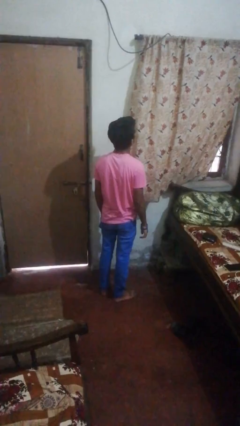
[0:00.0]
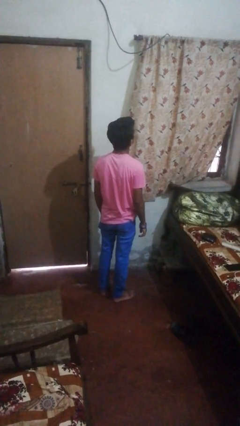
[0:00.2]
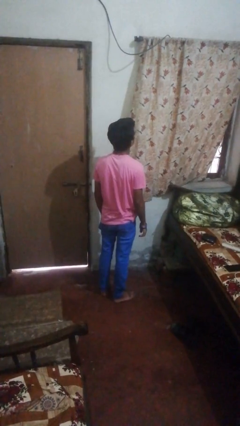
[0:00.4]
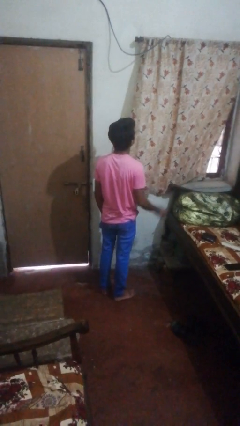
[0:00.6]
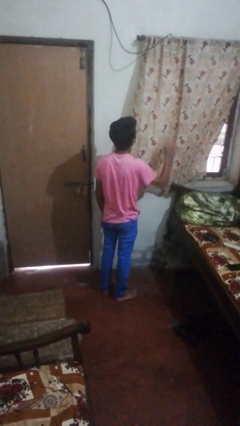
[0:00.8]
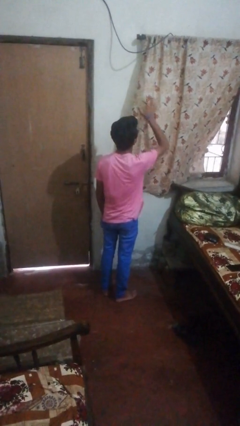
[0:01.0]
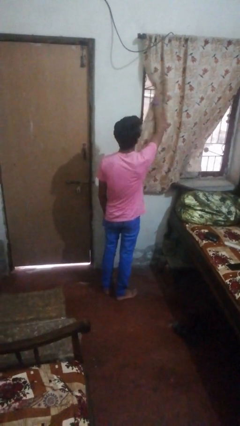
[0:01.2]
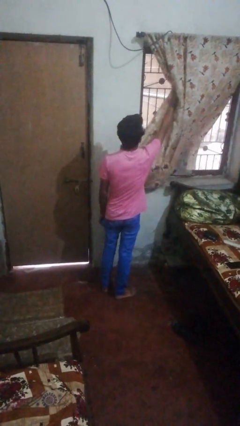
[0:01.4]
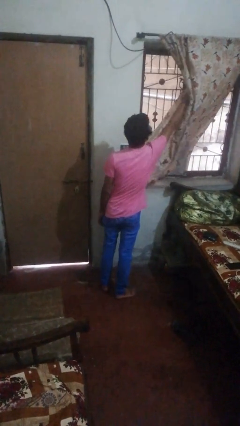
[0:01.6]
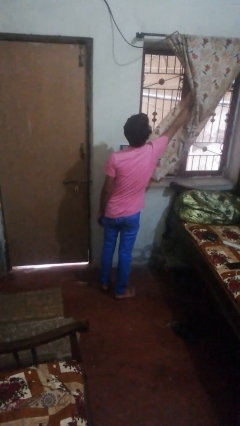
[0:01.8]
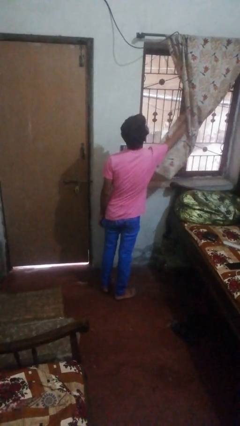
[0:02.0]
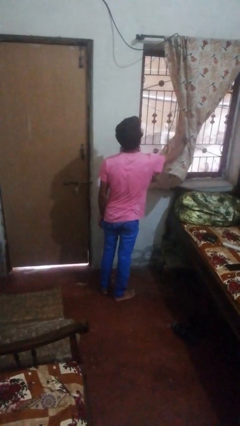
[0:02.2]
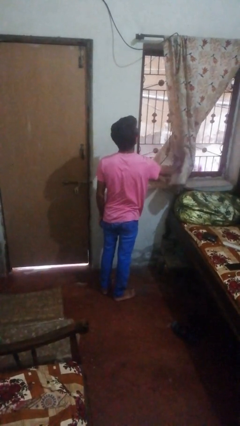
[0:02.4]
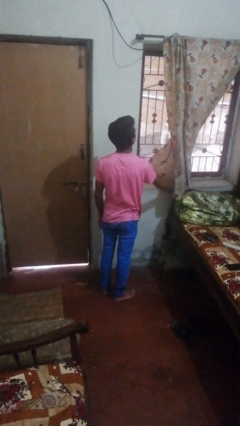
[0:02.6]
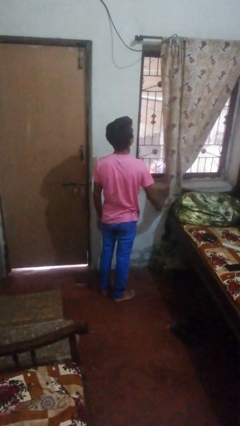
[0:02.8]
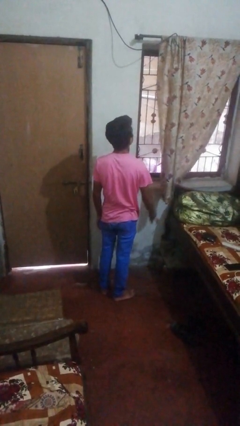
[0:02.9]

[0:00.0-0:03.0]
person opens curtains

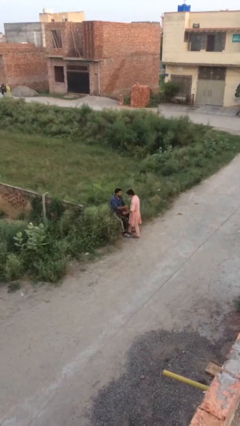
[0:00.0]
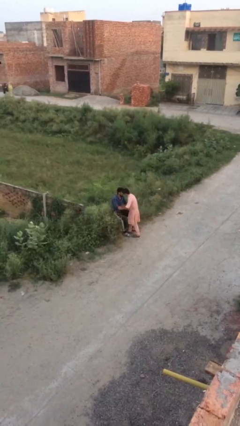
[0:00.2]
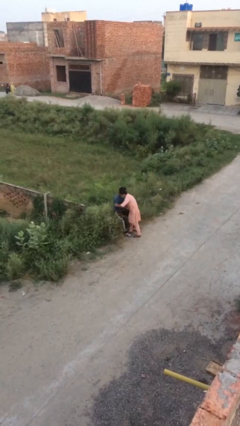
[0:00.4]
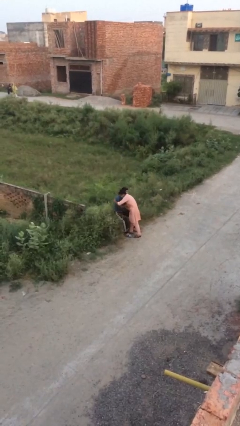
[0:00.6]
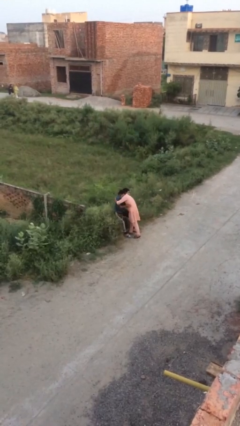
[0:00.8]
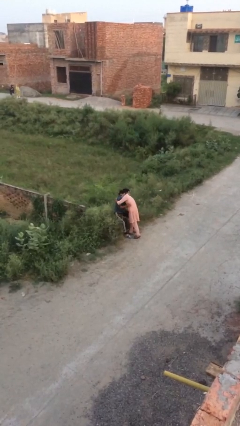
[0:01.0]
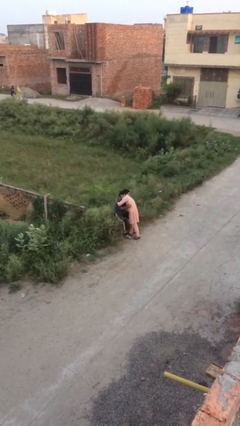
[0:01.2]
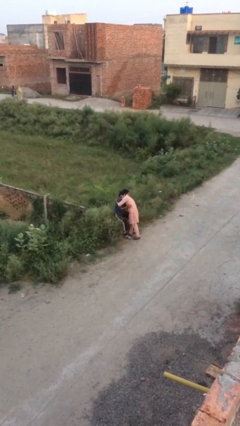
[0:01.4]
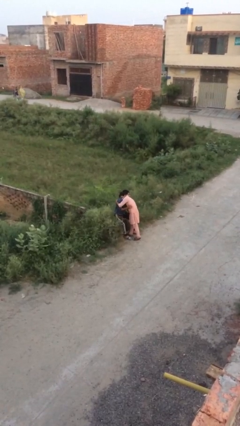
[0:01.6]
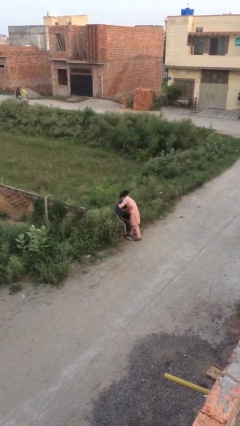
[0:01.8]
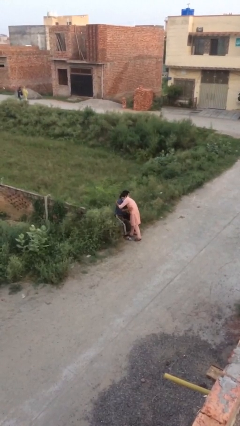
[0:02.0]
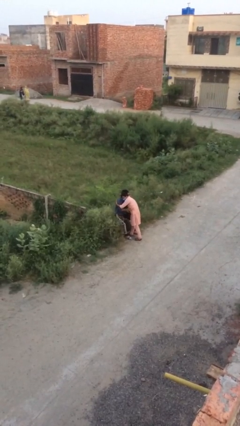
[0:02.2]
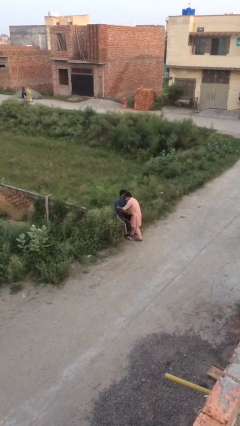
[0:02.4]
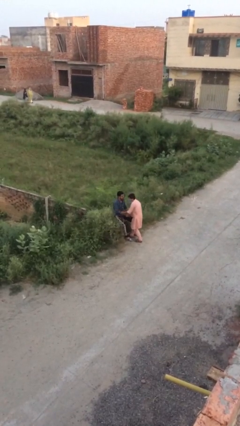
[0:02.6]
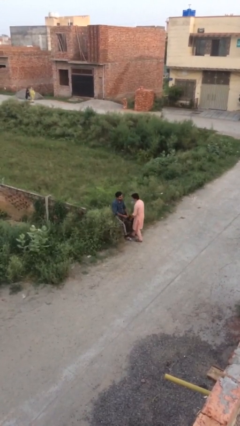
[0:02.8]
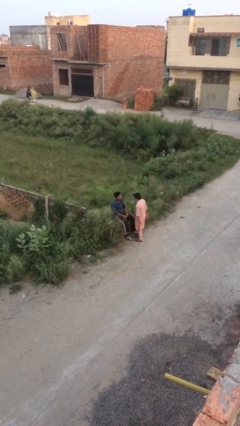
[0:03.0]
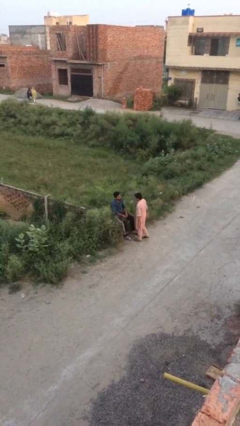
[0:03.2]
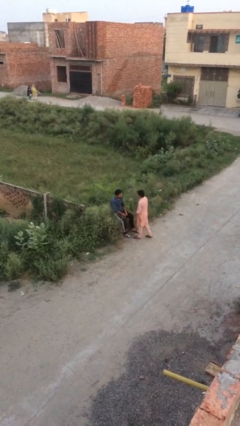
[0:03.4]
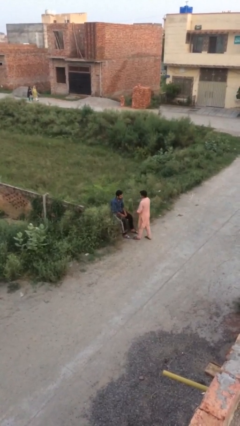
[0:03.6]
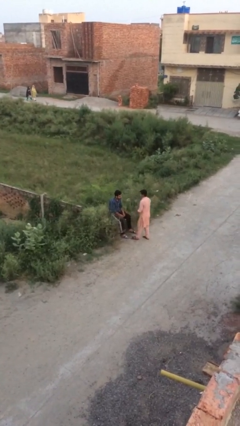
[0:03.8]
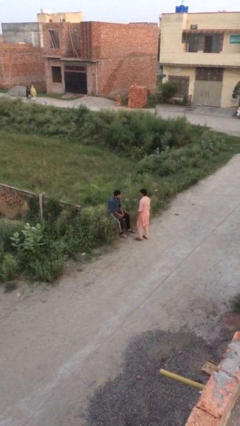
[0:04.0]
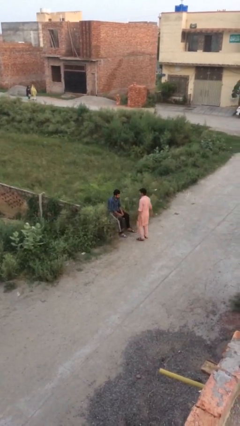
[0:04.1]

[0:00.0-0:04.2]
person embraces person

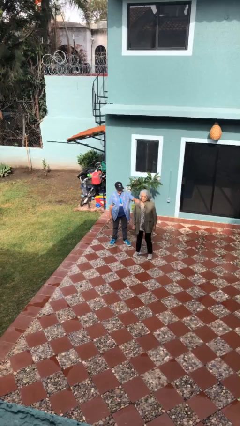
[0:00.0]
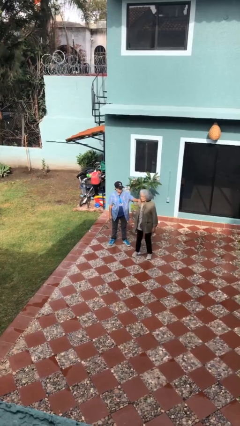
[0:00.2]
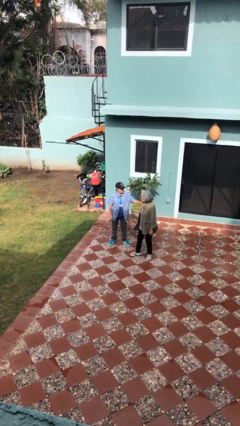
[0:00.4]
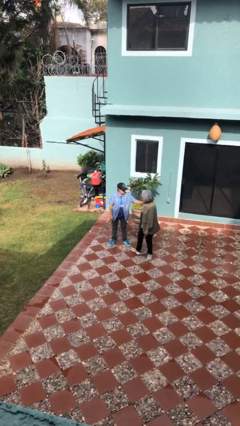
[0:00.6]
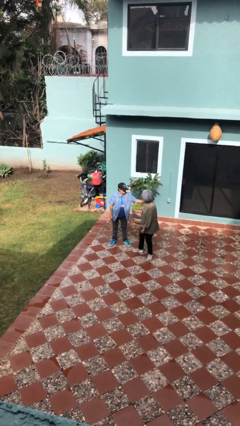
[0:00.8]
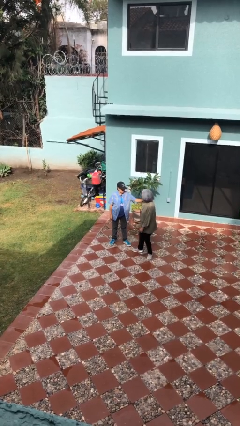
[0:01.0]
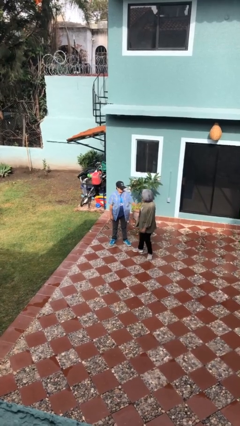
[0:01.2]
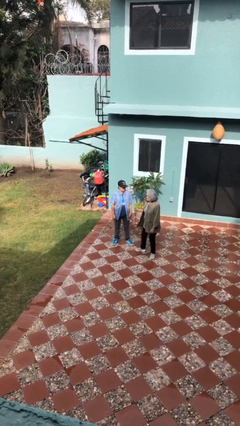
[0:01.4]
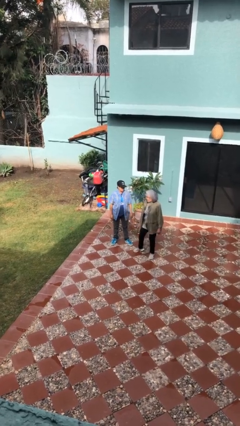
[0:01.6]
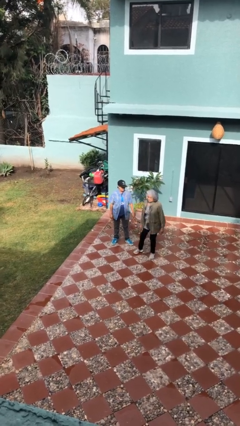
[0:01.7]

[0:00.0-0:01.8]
person spins person around

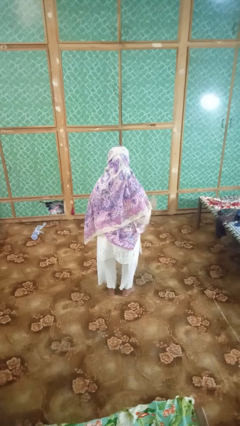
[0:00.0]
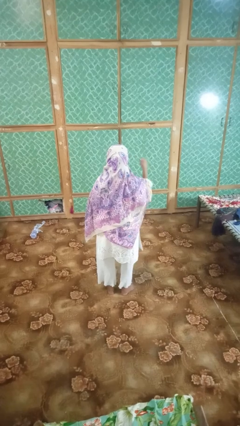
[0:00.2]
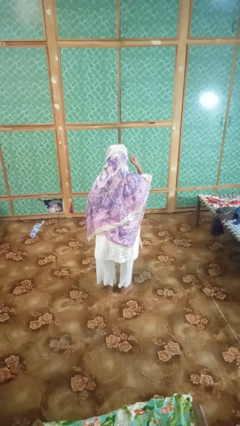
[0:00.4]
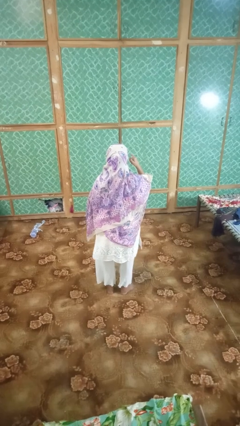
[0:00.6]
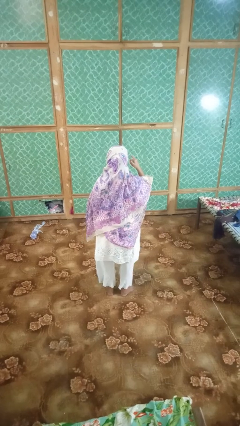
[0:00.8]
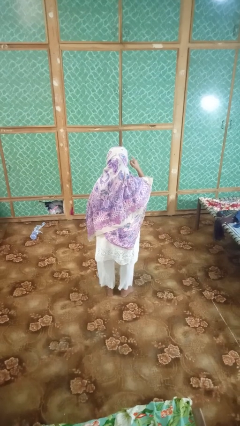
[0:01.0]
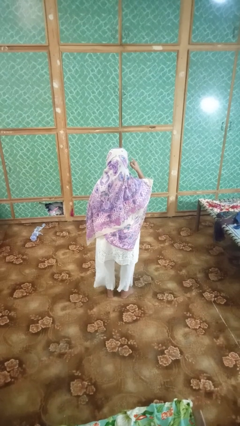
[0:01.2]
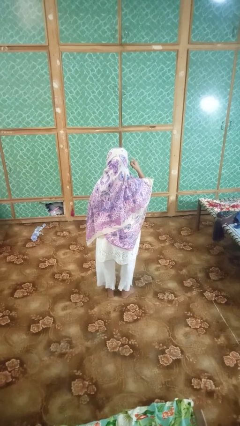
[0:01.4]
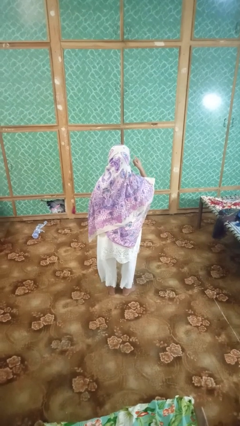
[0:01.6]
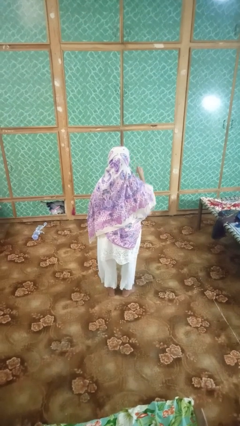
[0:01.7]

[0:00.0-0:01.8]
person gestures call me

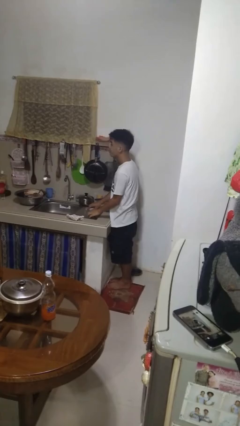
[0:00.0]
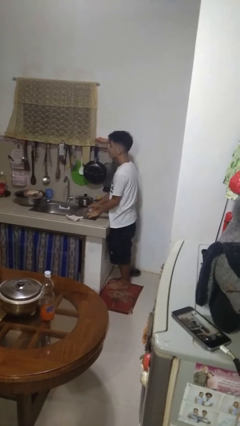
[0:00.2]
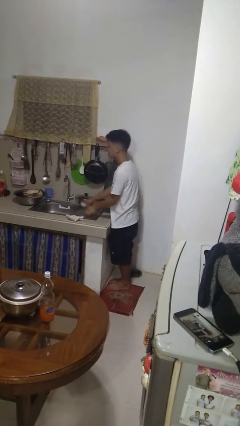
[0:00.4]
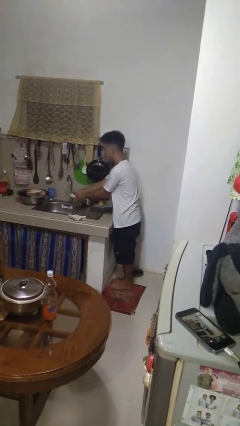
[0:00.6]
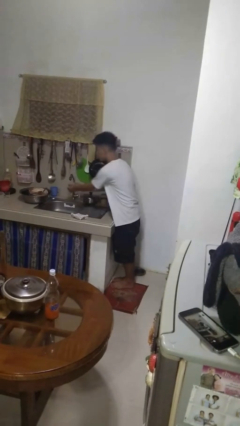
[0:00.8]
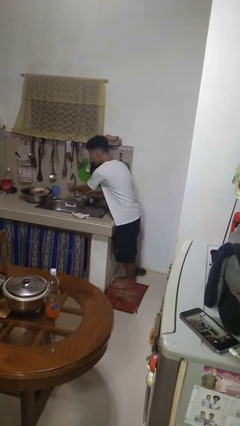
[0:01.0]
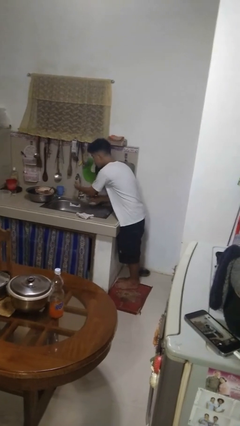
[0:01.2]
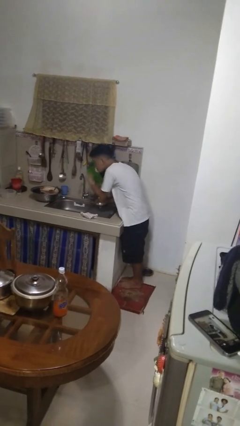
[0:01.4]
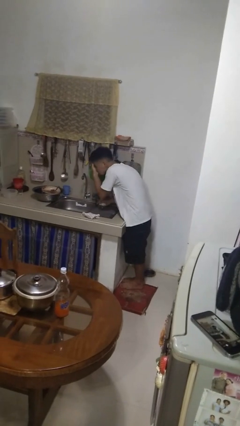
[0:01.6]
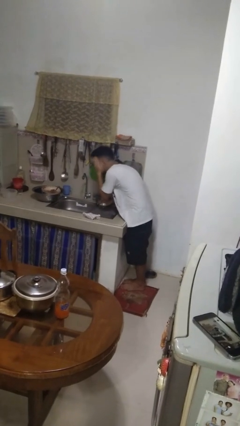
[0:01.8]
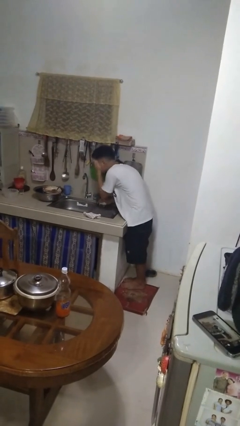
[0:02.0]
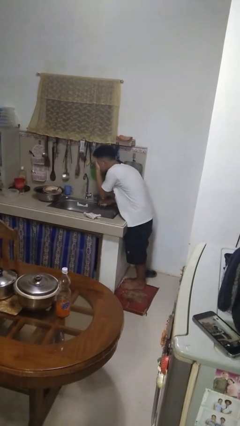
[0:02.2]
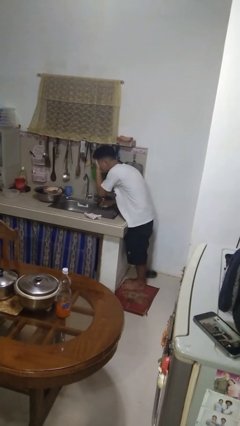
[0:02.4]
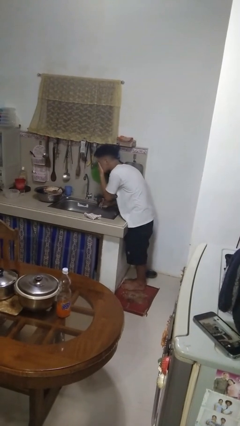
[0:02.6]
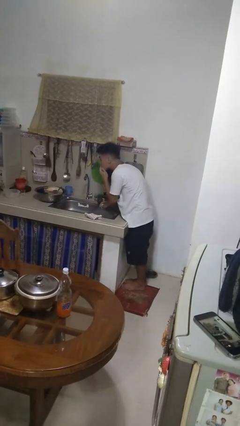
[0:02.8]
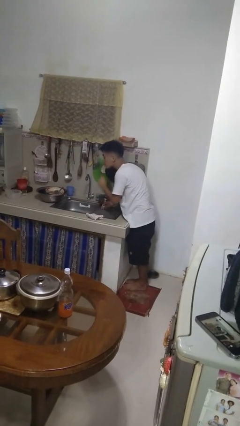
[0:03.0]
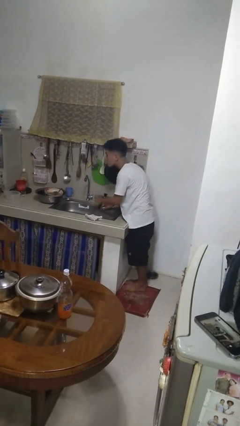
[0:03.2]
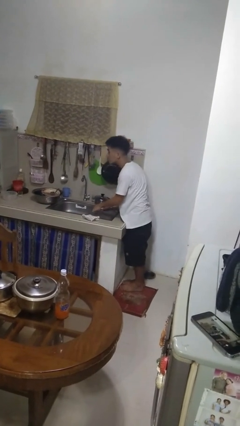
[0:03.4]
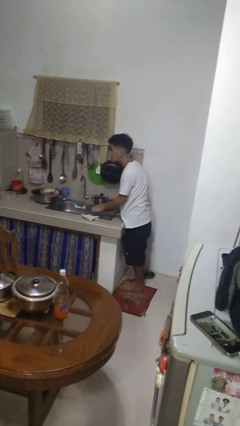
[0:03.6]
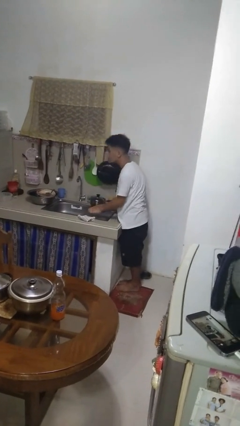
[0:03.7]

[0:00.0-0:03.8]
person washes face

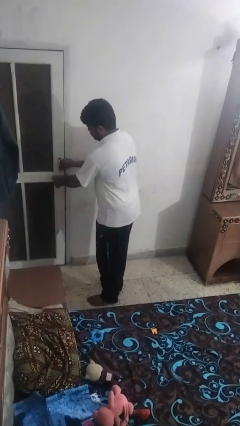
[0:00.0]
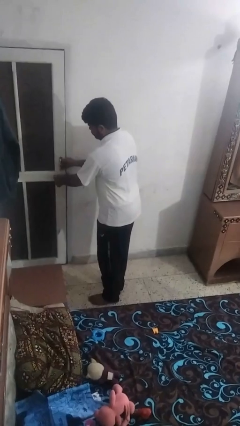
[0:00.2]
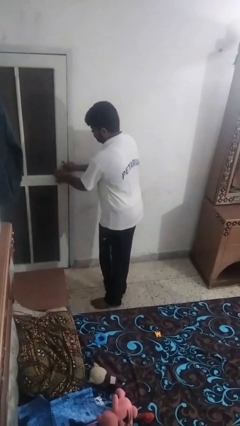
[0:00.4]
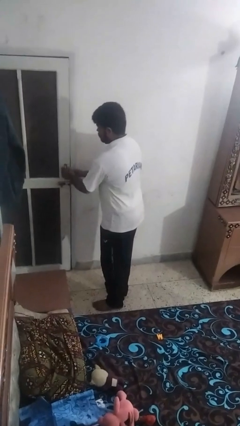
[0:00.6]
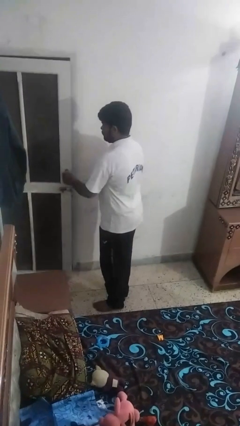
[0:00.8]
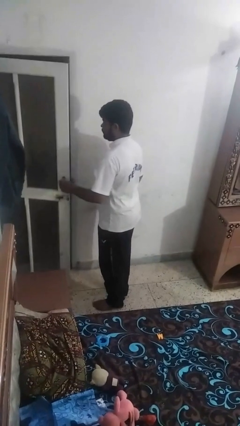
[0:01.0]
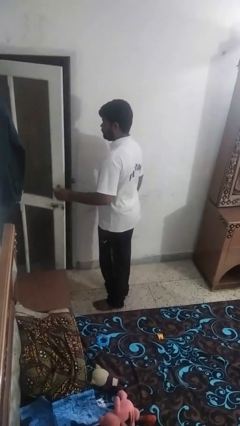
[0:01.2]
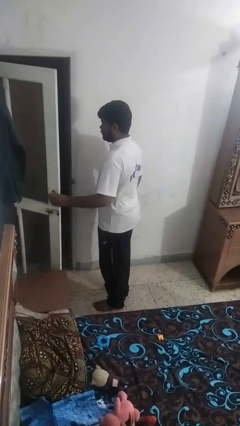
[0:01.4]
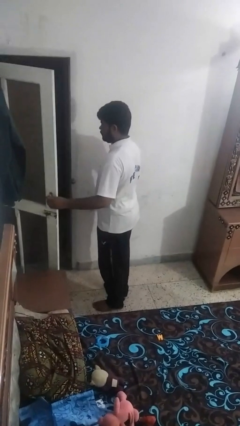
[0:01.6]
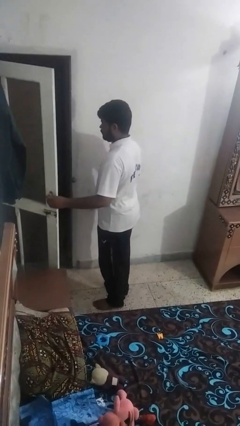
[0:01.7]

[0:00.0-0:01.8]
person opens facility door

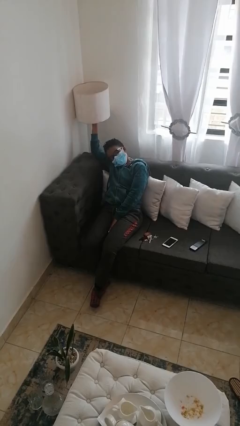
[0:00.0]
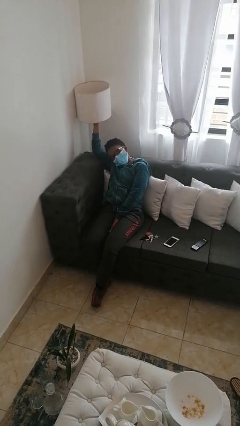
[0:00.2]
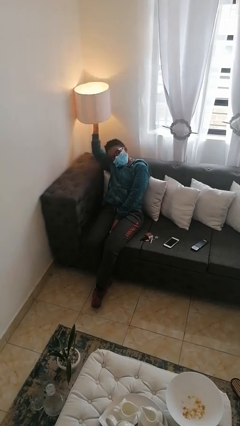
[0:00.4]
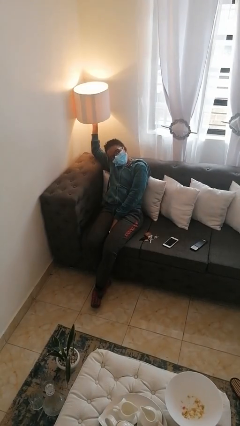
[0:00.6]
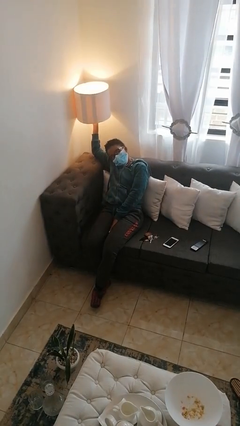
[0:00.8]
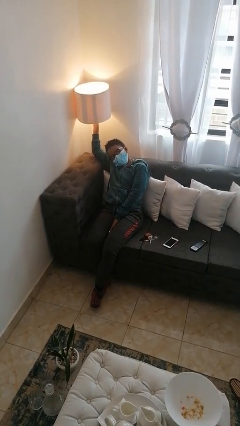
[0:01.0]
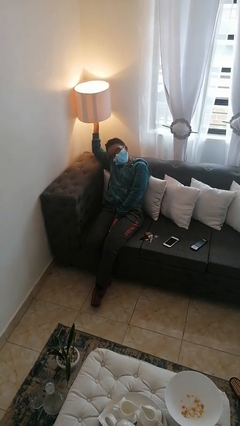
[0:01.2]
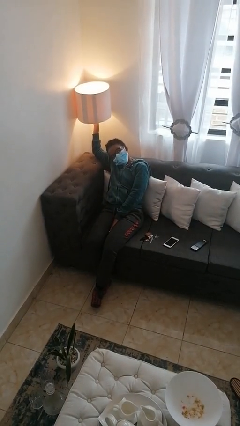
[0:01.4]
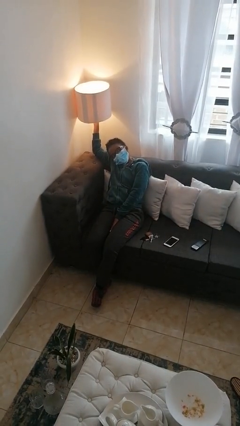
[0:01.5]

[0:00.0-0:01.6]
person turns on lamp
